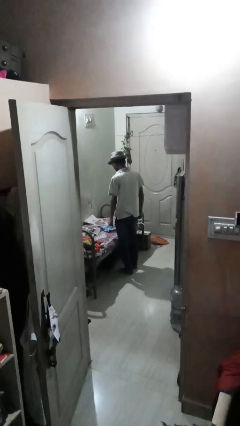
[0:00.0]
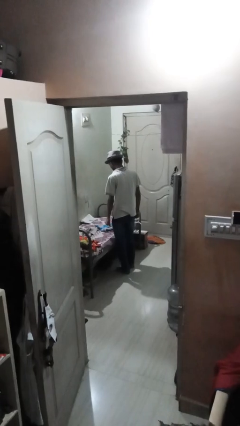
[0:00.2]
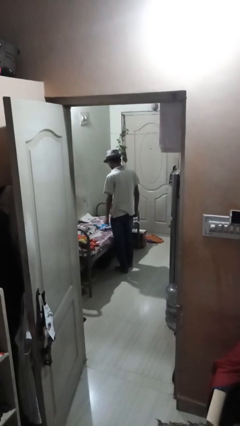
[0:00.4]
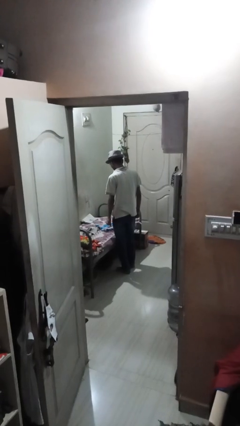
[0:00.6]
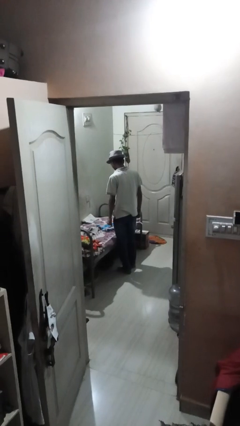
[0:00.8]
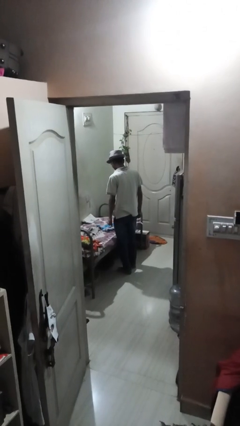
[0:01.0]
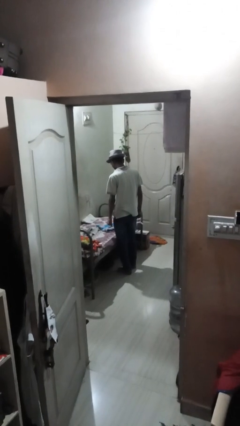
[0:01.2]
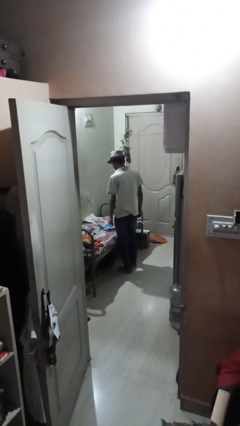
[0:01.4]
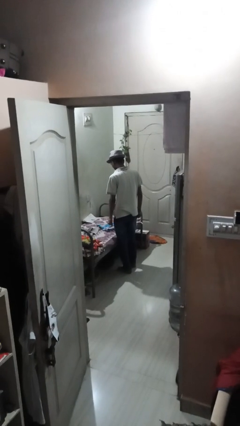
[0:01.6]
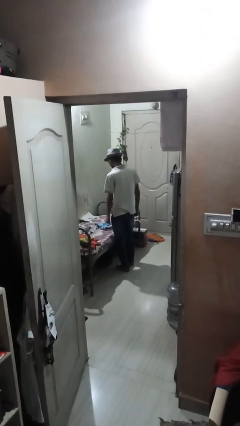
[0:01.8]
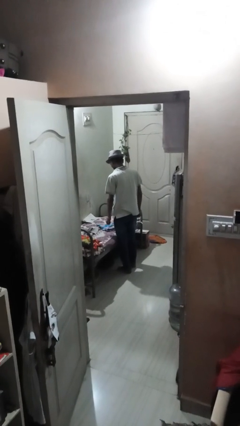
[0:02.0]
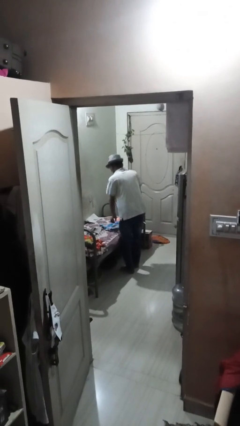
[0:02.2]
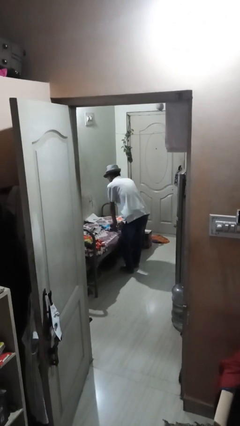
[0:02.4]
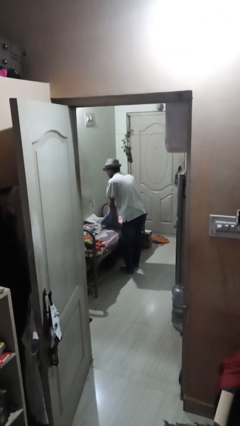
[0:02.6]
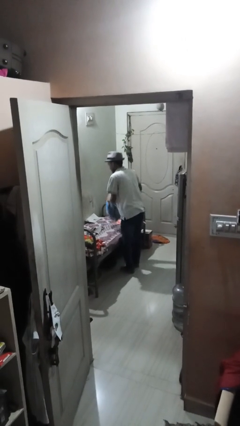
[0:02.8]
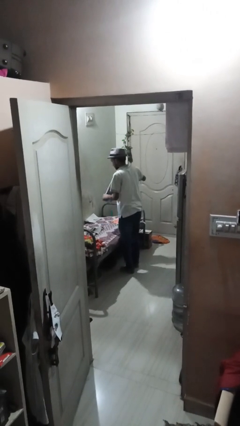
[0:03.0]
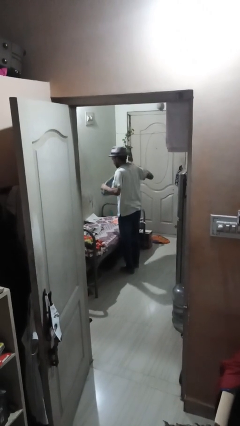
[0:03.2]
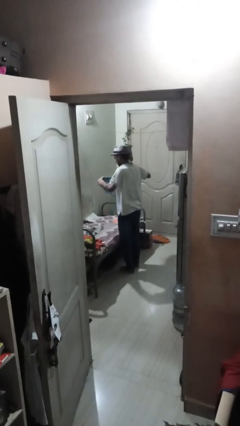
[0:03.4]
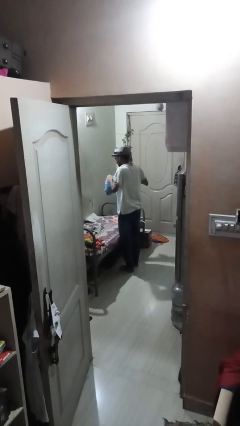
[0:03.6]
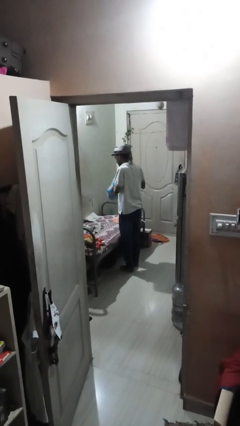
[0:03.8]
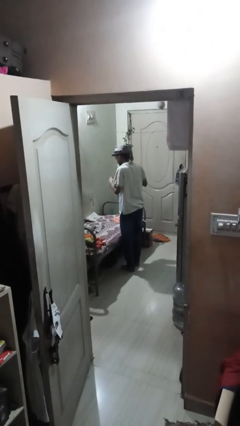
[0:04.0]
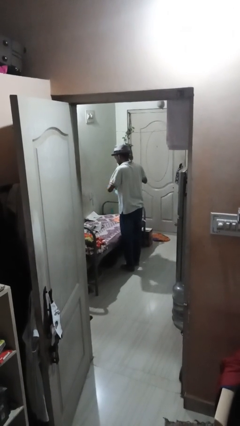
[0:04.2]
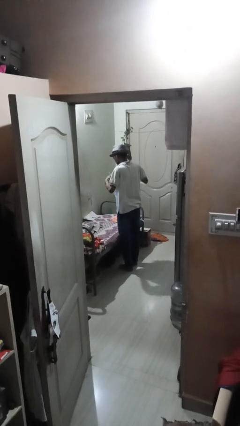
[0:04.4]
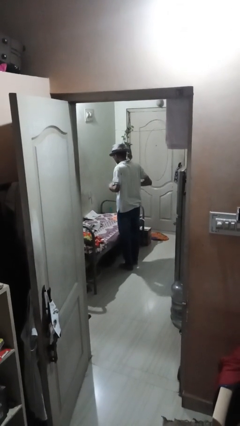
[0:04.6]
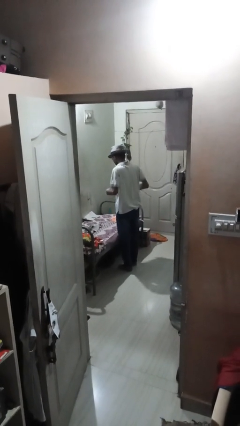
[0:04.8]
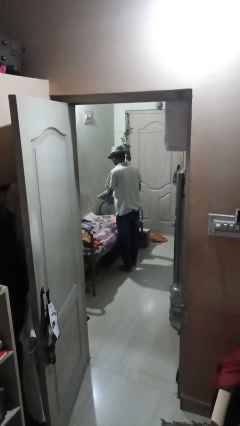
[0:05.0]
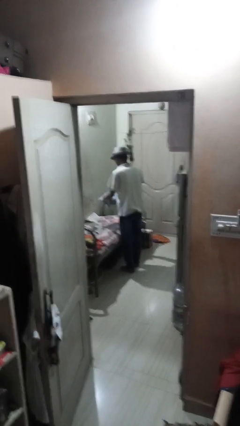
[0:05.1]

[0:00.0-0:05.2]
person folds towel

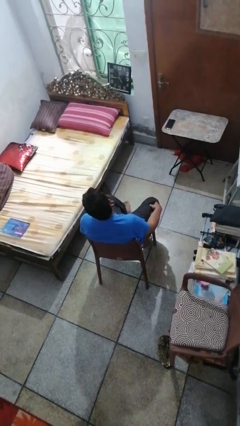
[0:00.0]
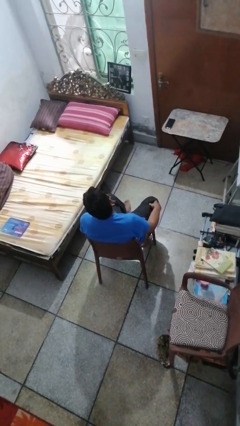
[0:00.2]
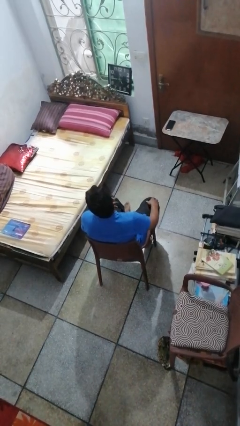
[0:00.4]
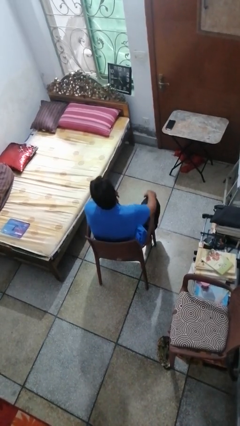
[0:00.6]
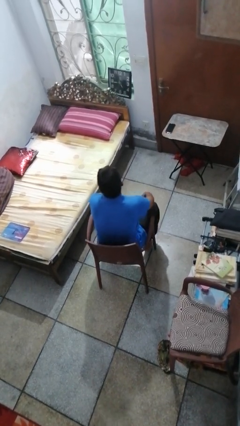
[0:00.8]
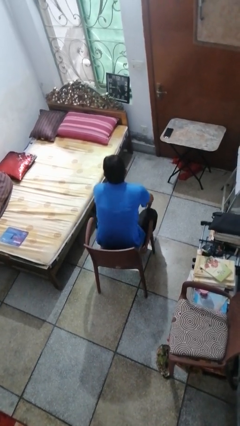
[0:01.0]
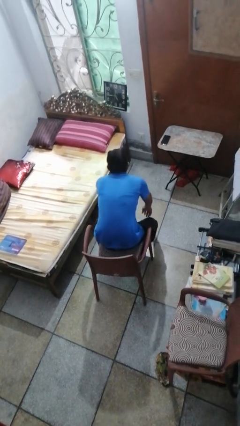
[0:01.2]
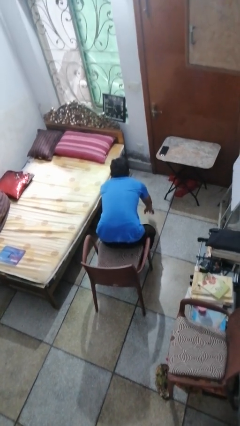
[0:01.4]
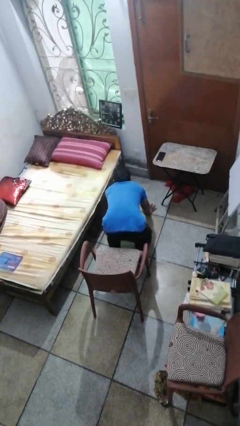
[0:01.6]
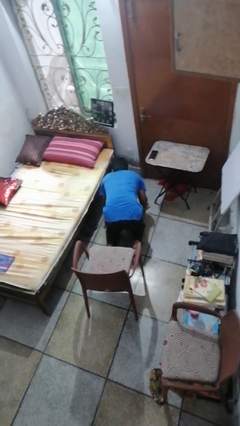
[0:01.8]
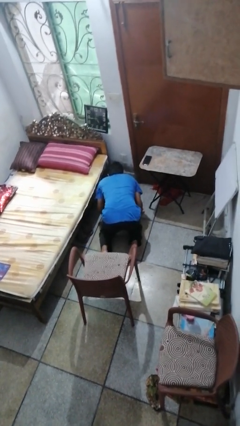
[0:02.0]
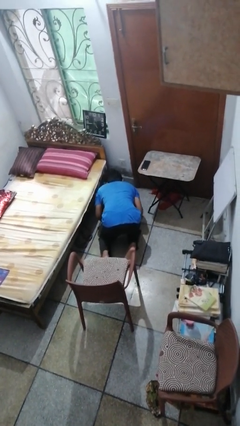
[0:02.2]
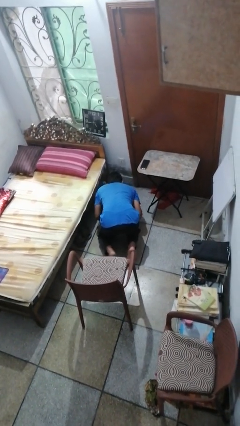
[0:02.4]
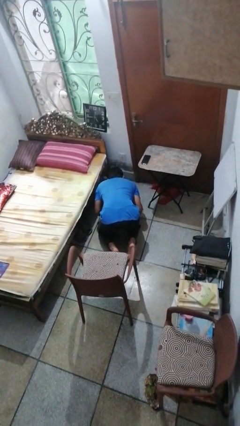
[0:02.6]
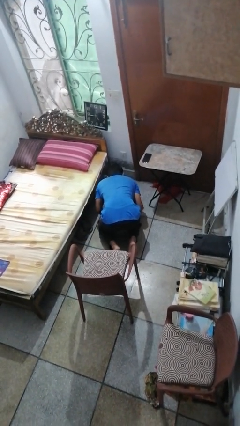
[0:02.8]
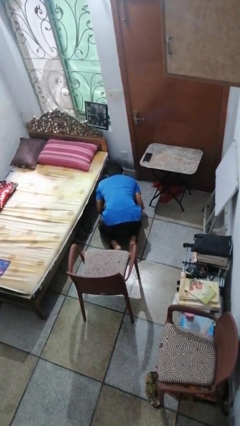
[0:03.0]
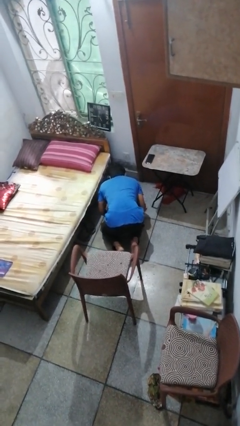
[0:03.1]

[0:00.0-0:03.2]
person falls from chair

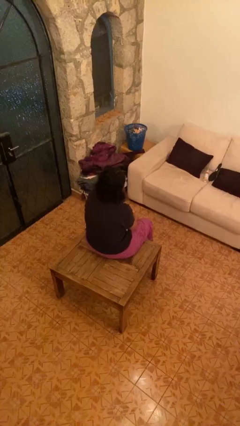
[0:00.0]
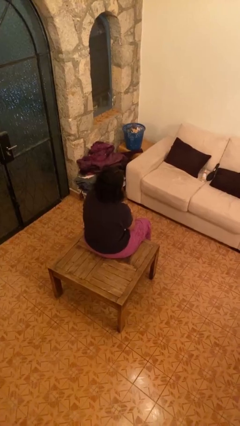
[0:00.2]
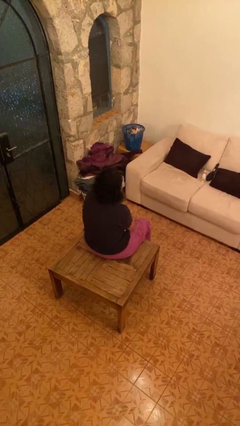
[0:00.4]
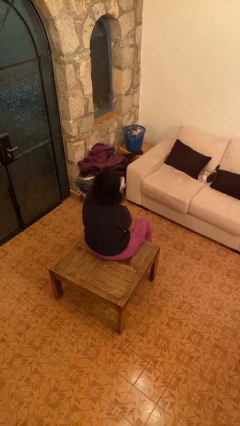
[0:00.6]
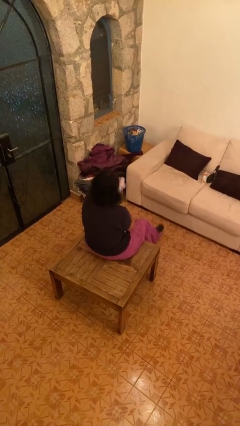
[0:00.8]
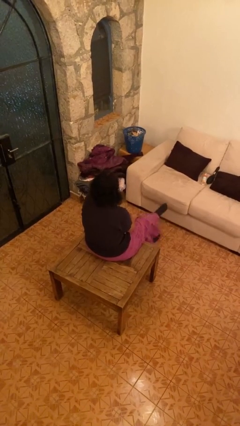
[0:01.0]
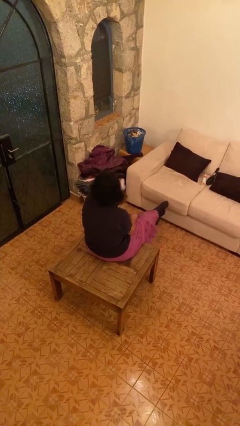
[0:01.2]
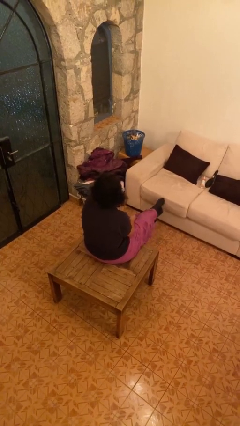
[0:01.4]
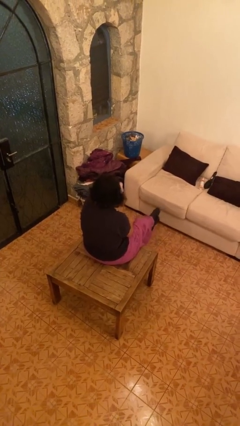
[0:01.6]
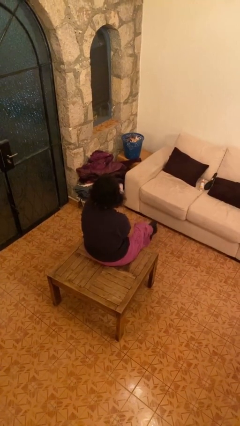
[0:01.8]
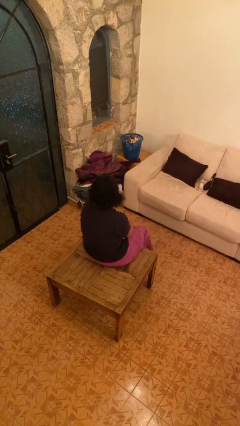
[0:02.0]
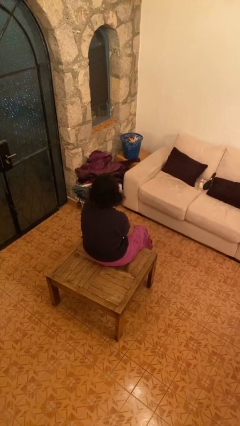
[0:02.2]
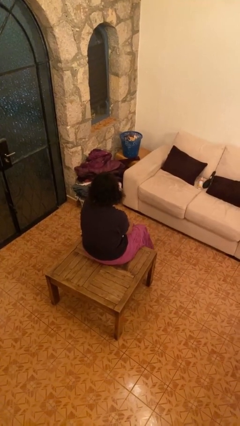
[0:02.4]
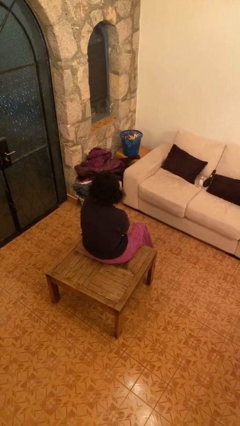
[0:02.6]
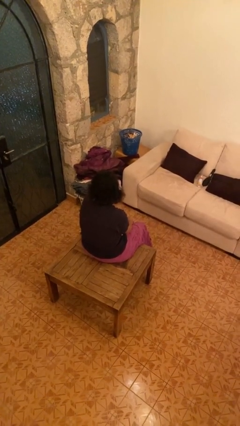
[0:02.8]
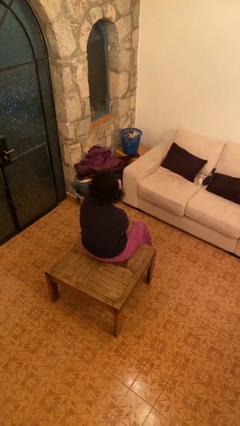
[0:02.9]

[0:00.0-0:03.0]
person crosses legs

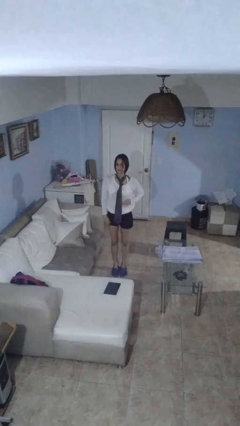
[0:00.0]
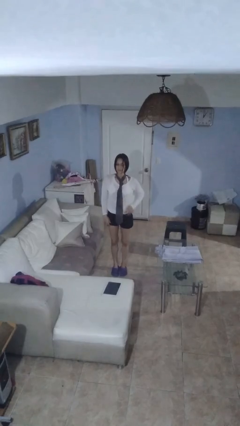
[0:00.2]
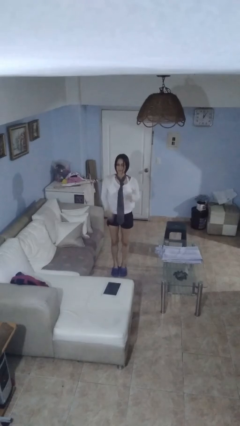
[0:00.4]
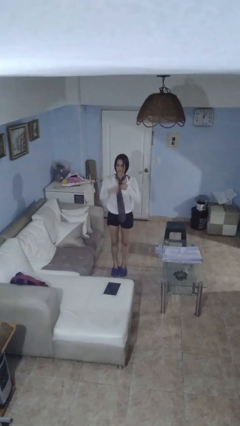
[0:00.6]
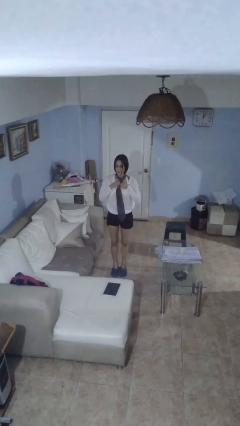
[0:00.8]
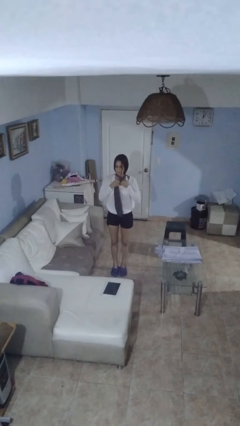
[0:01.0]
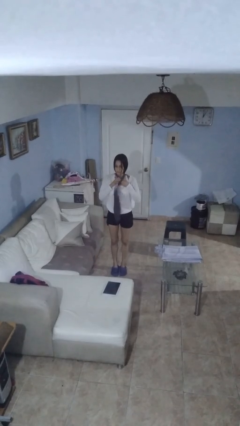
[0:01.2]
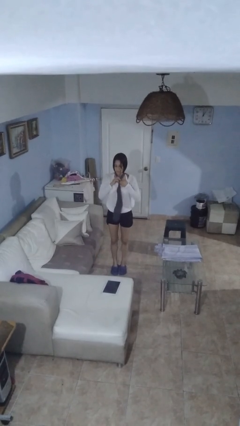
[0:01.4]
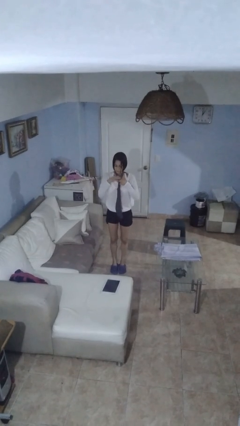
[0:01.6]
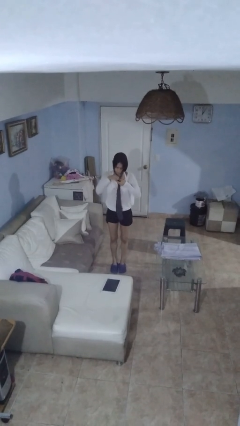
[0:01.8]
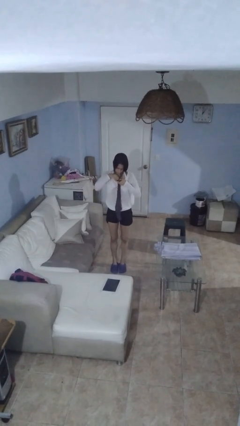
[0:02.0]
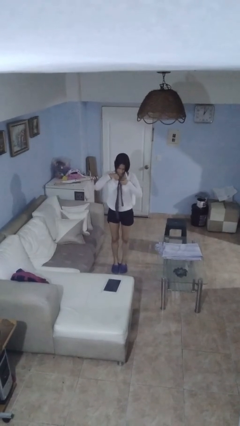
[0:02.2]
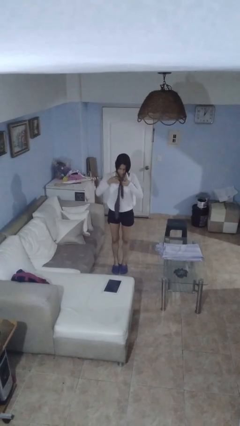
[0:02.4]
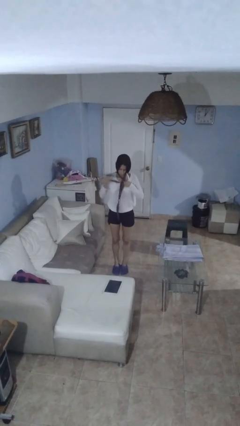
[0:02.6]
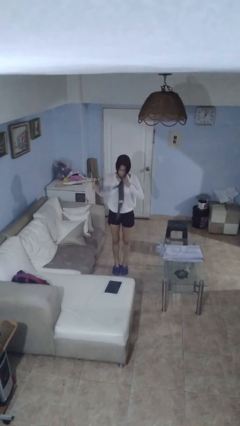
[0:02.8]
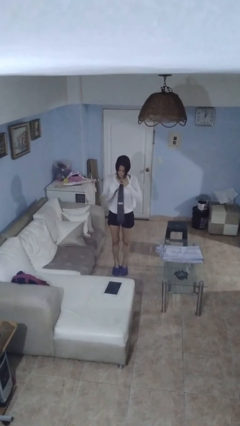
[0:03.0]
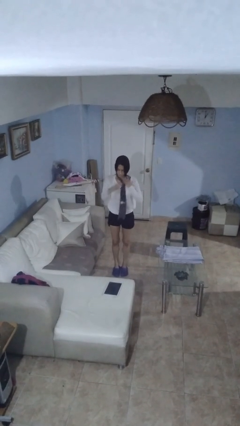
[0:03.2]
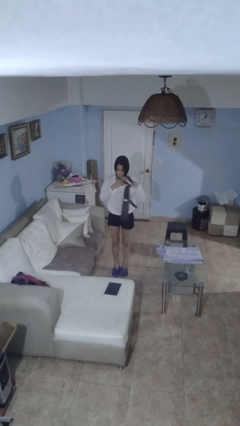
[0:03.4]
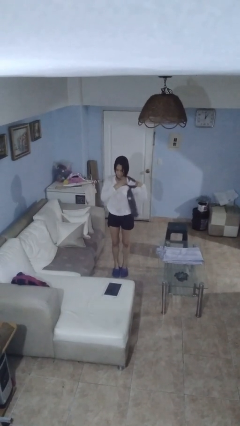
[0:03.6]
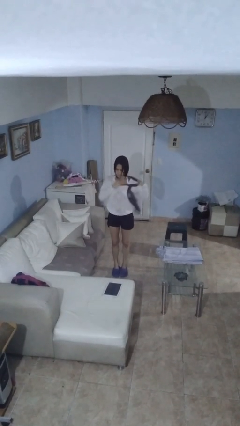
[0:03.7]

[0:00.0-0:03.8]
person takes off necktie

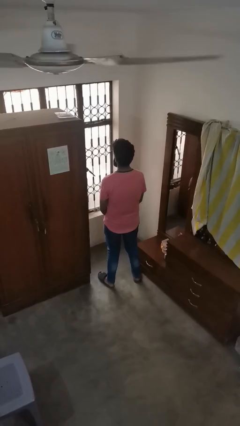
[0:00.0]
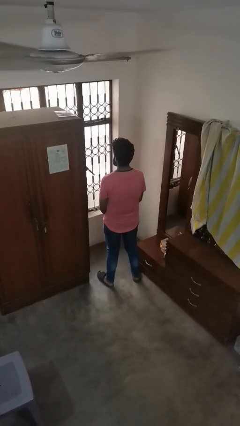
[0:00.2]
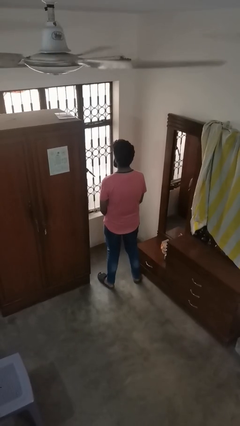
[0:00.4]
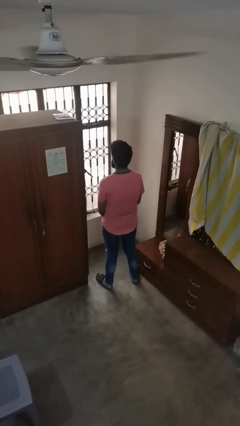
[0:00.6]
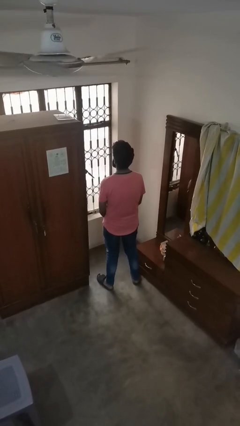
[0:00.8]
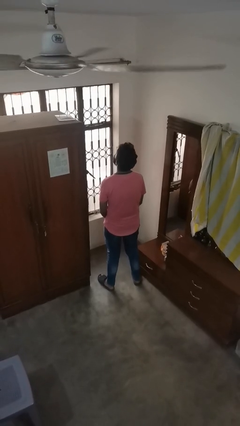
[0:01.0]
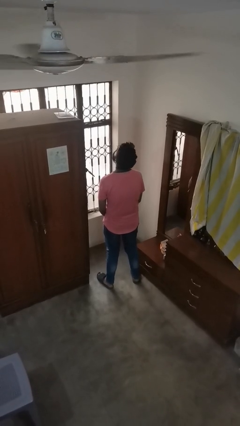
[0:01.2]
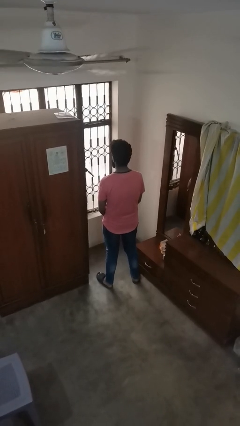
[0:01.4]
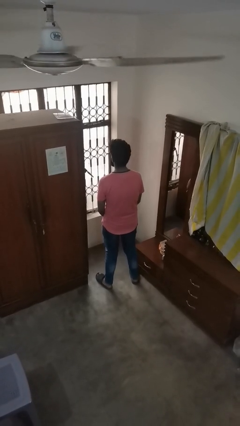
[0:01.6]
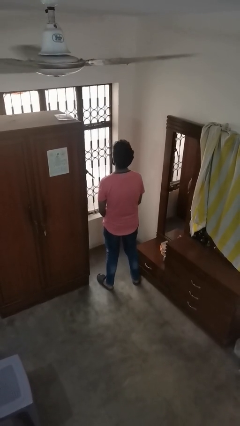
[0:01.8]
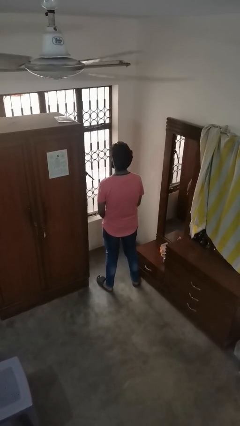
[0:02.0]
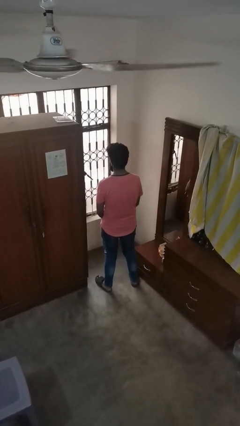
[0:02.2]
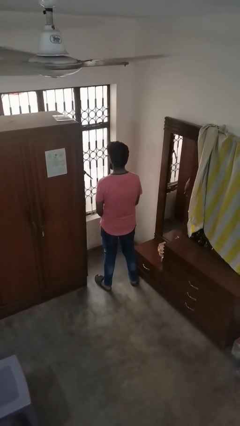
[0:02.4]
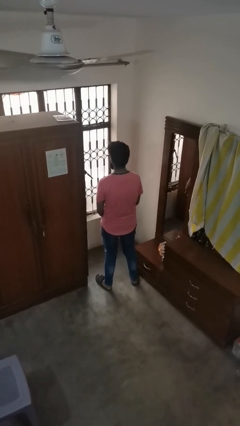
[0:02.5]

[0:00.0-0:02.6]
person nods head
